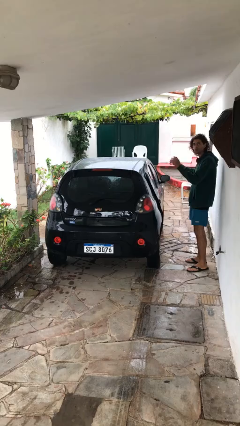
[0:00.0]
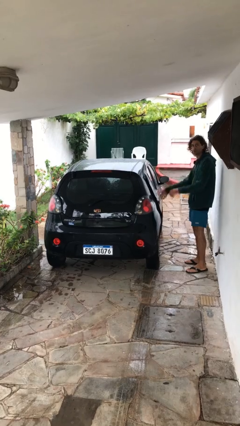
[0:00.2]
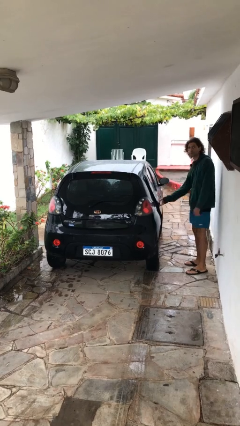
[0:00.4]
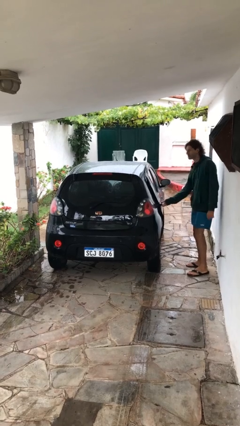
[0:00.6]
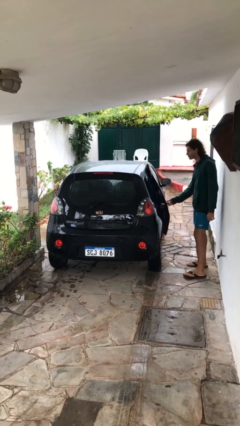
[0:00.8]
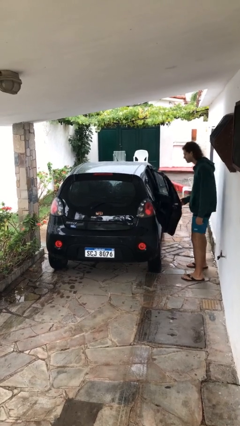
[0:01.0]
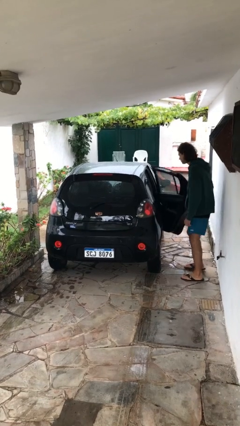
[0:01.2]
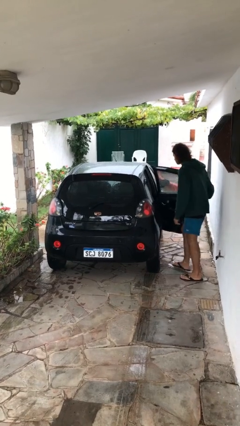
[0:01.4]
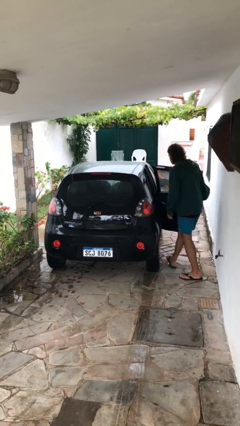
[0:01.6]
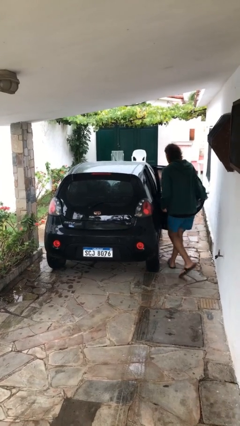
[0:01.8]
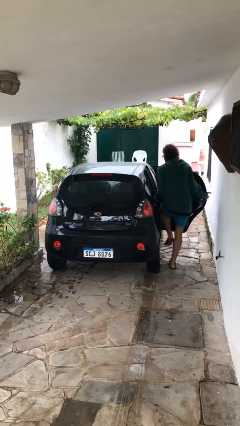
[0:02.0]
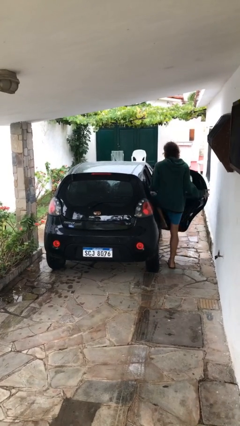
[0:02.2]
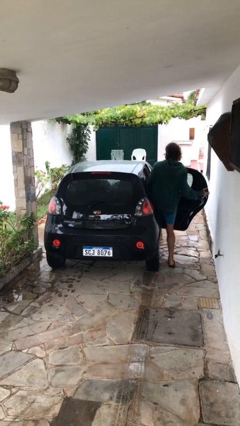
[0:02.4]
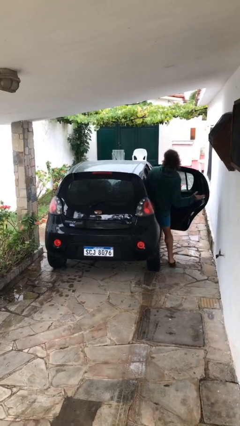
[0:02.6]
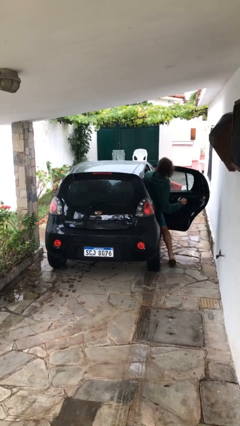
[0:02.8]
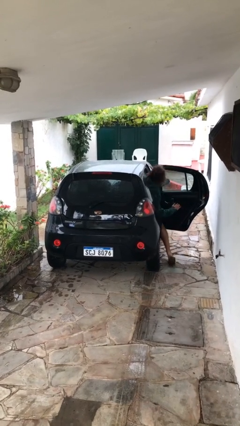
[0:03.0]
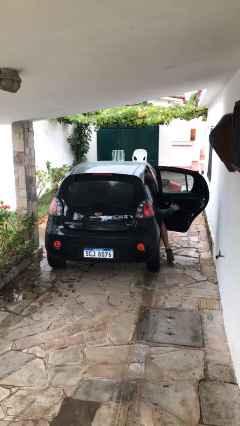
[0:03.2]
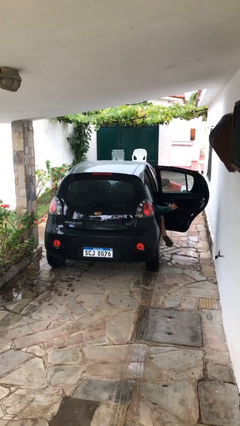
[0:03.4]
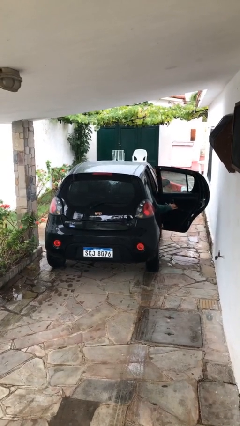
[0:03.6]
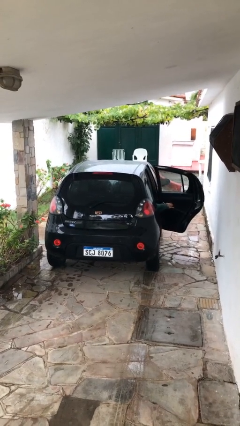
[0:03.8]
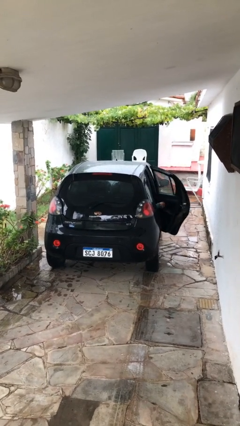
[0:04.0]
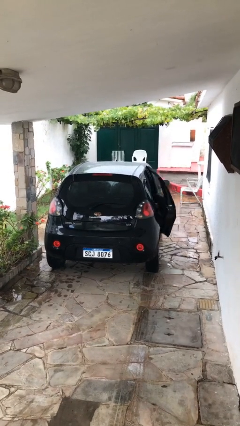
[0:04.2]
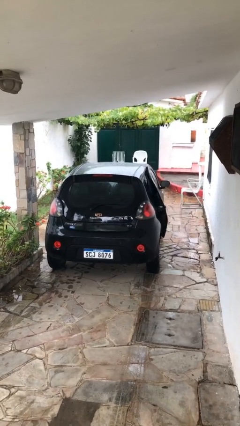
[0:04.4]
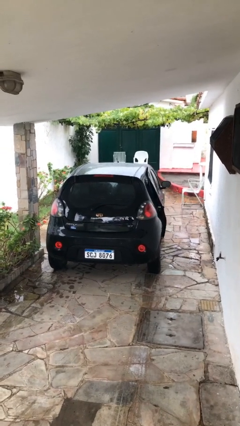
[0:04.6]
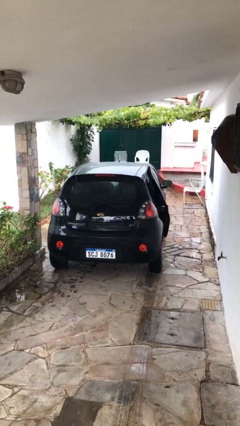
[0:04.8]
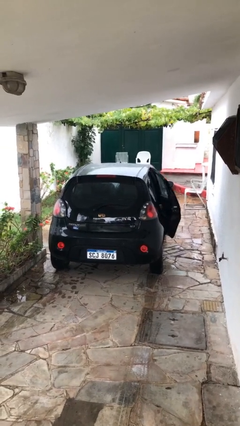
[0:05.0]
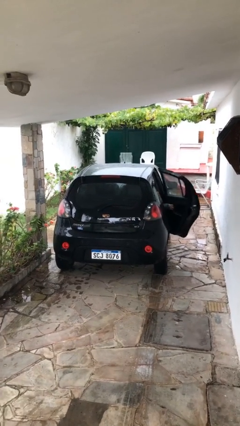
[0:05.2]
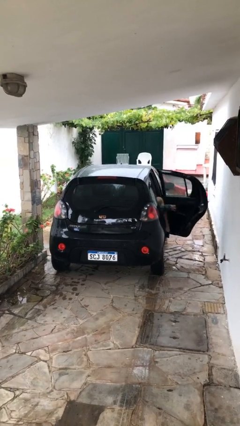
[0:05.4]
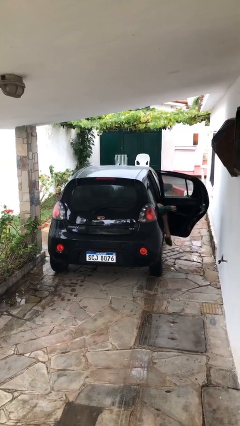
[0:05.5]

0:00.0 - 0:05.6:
car picks up person

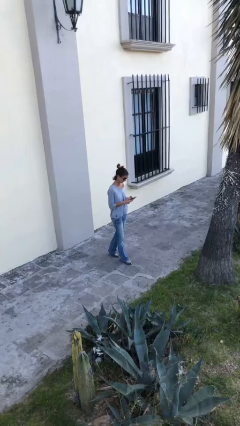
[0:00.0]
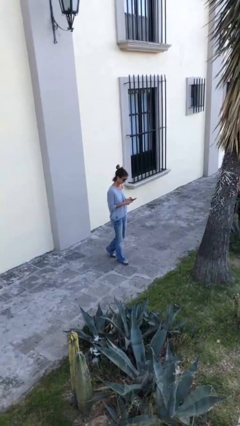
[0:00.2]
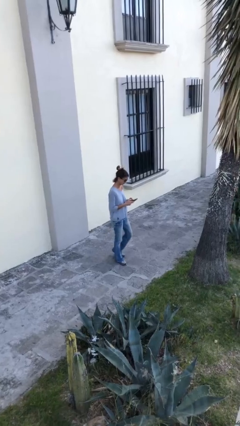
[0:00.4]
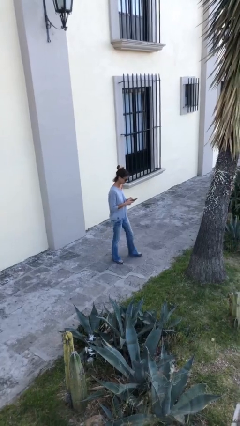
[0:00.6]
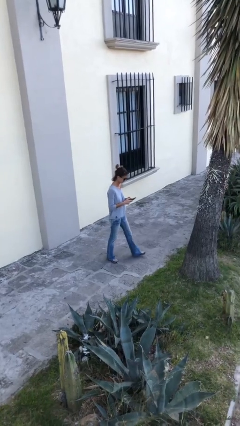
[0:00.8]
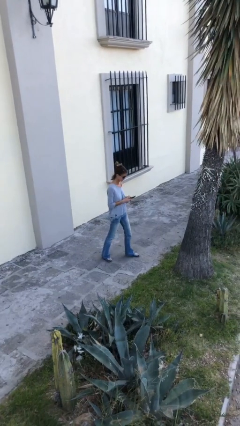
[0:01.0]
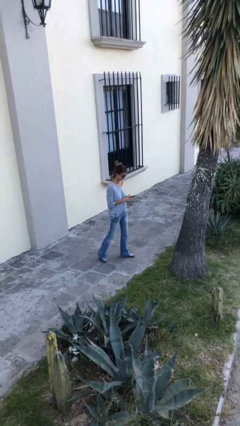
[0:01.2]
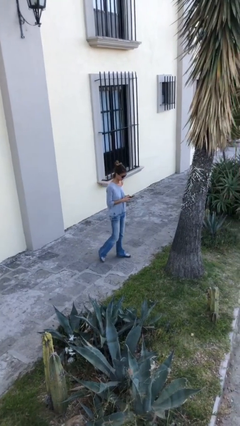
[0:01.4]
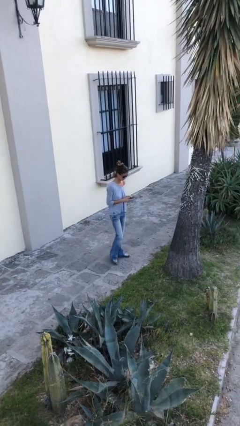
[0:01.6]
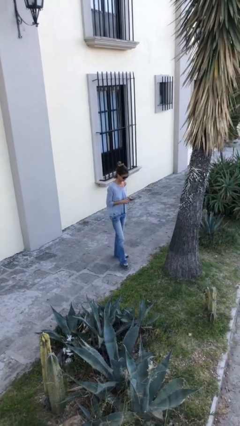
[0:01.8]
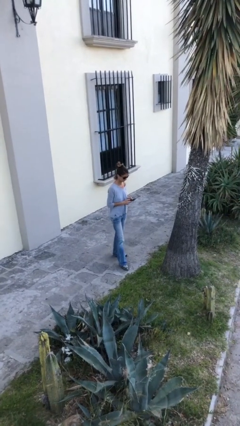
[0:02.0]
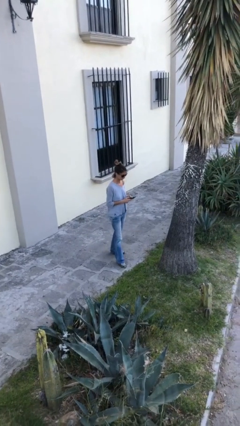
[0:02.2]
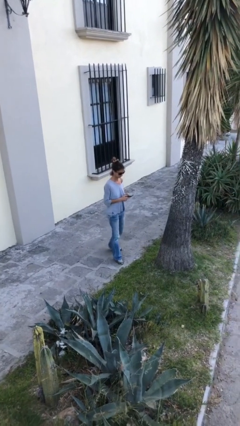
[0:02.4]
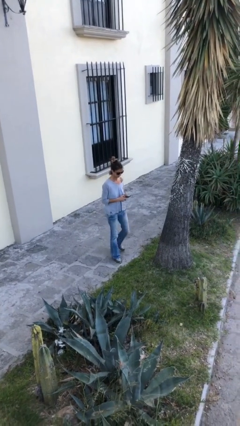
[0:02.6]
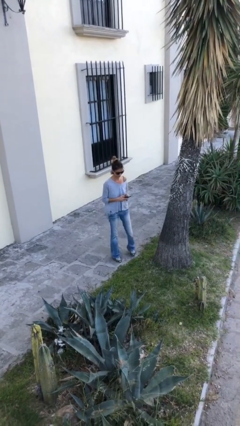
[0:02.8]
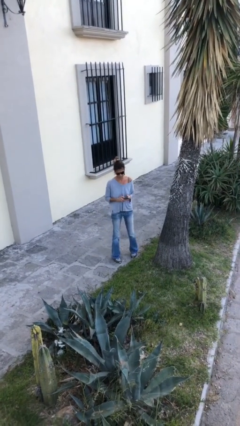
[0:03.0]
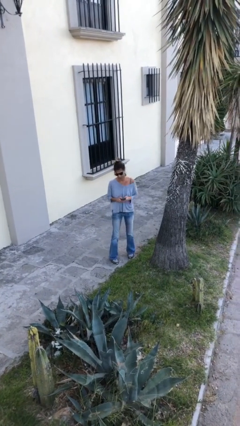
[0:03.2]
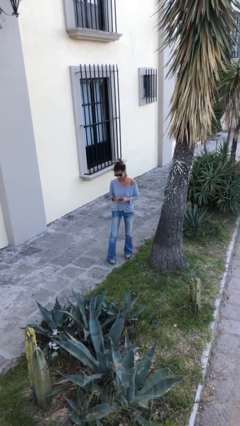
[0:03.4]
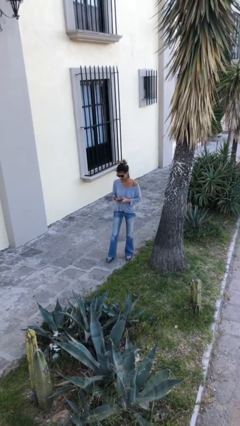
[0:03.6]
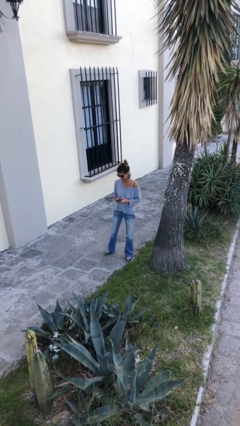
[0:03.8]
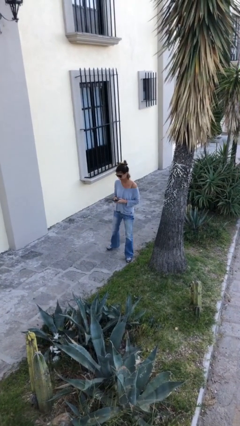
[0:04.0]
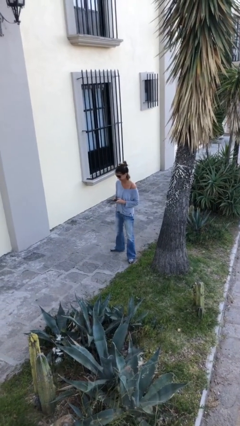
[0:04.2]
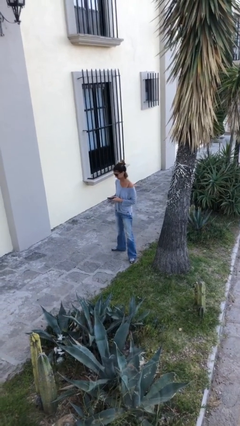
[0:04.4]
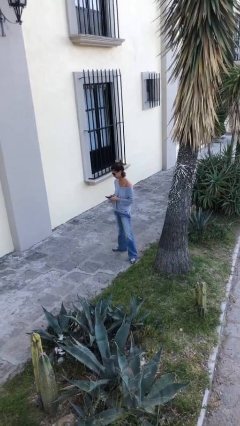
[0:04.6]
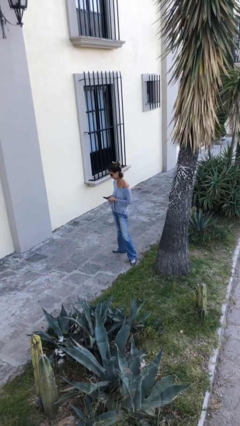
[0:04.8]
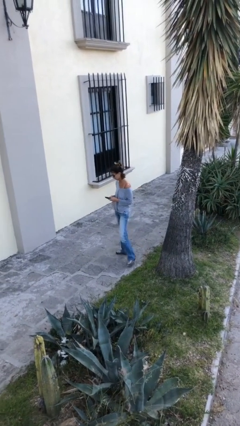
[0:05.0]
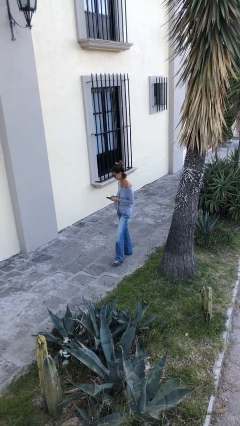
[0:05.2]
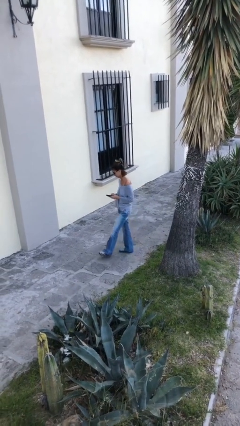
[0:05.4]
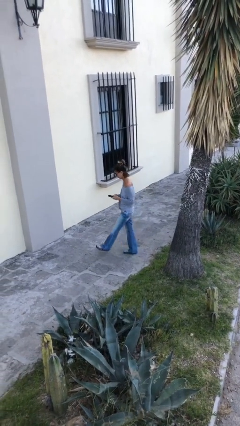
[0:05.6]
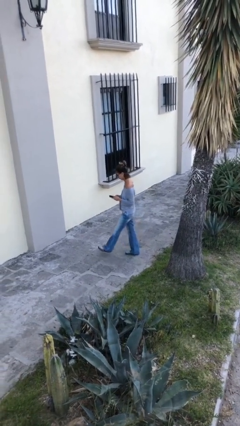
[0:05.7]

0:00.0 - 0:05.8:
person texts on phone

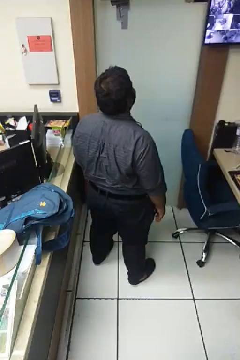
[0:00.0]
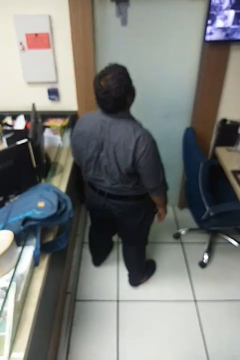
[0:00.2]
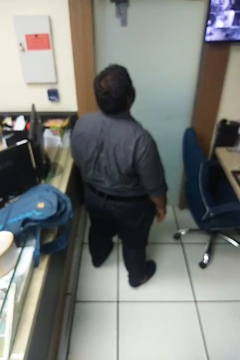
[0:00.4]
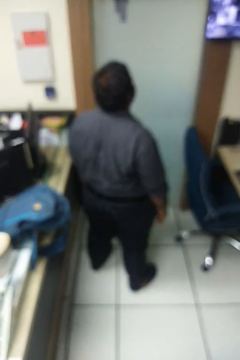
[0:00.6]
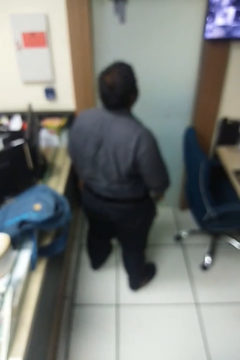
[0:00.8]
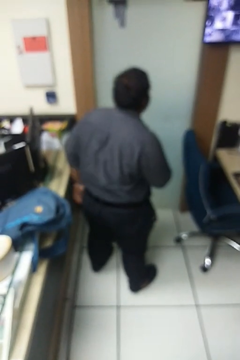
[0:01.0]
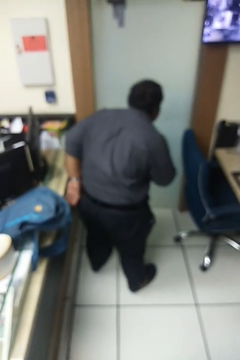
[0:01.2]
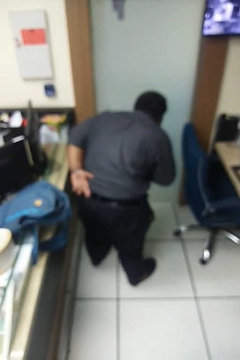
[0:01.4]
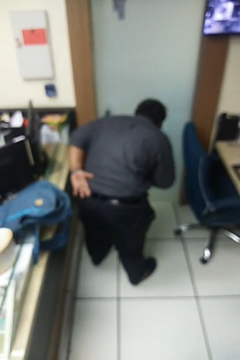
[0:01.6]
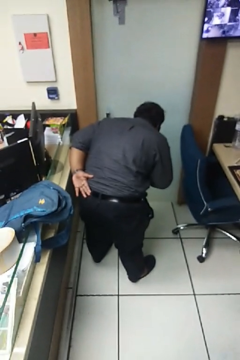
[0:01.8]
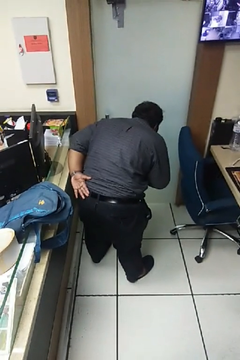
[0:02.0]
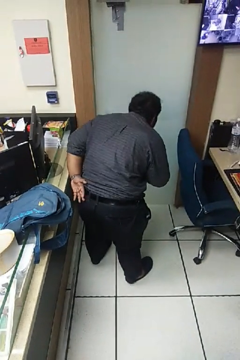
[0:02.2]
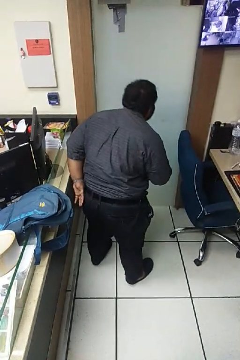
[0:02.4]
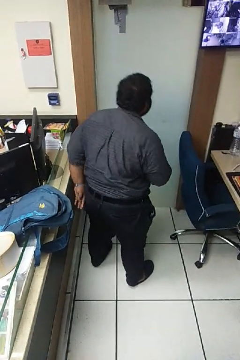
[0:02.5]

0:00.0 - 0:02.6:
person bows

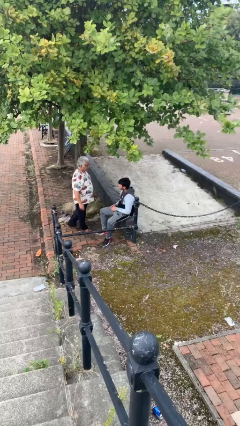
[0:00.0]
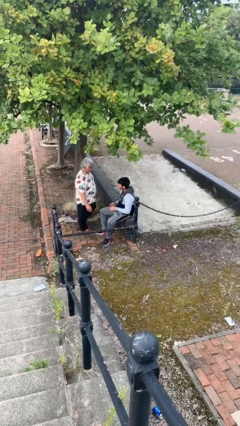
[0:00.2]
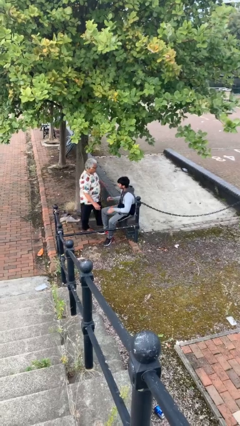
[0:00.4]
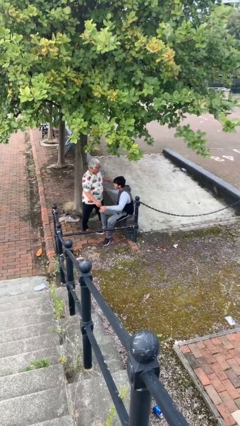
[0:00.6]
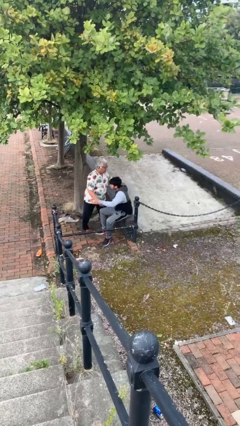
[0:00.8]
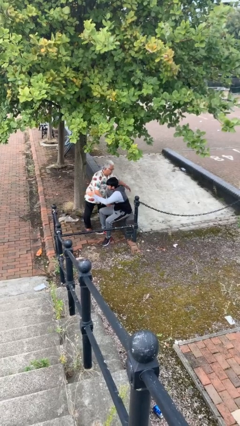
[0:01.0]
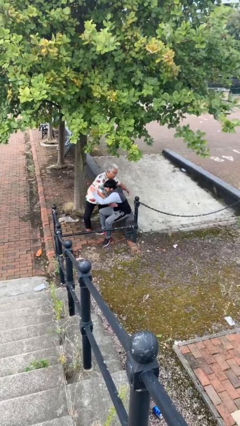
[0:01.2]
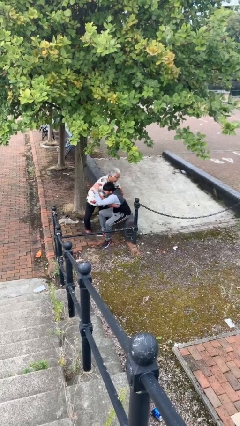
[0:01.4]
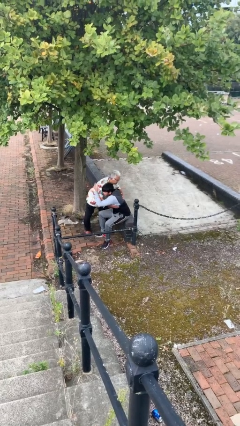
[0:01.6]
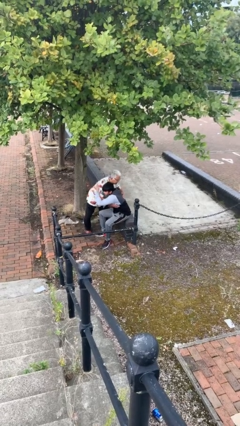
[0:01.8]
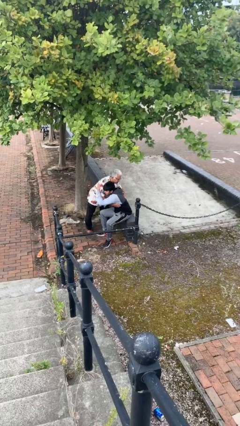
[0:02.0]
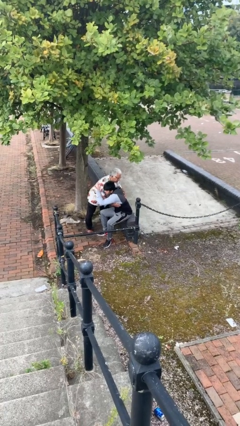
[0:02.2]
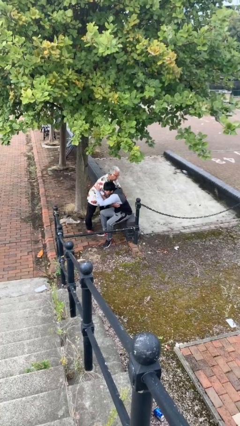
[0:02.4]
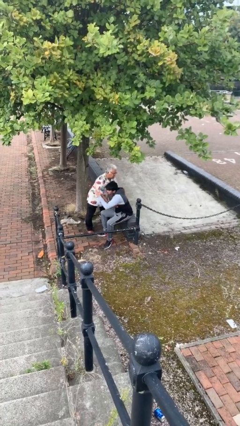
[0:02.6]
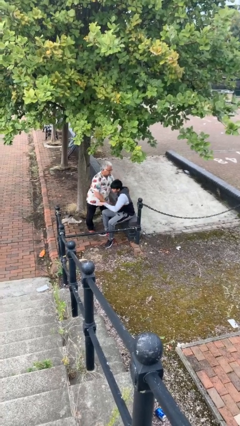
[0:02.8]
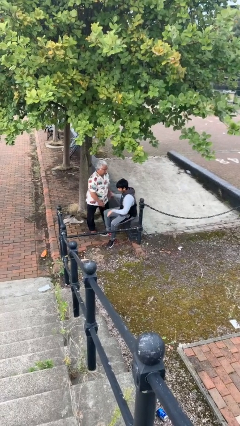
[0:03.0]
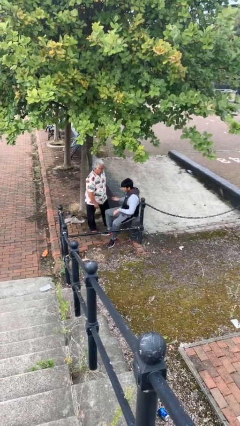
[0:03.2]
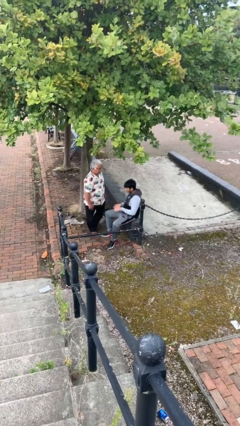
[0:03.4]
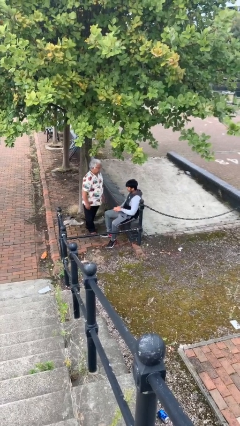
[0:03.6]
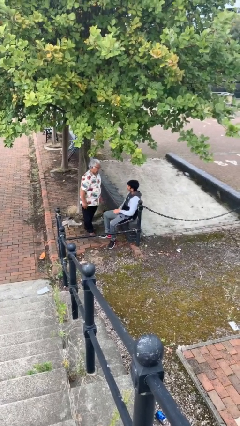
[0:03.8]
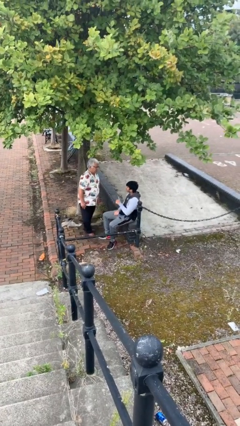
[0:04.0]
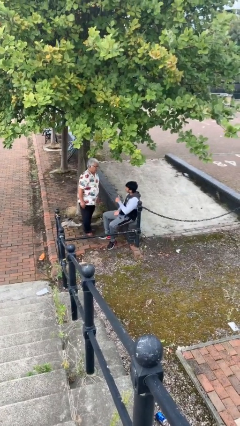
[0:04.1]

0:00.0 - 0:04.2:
person embraces person
